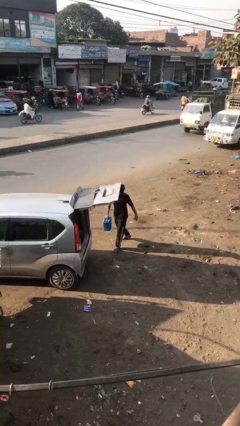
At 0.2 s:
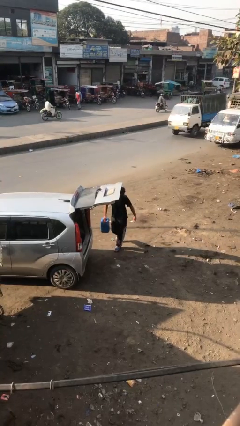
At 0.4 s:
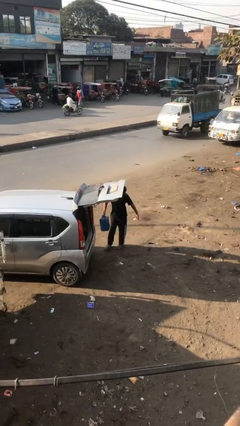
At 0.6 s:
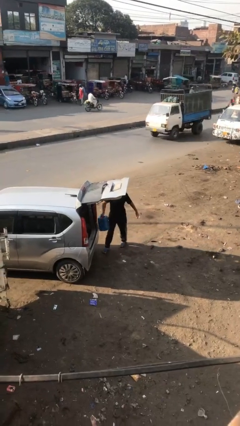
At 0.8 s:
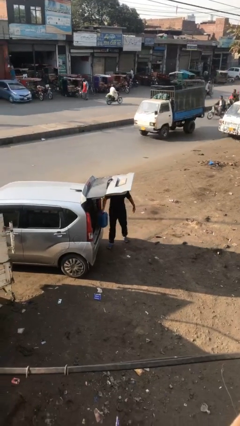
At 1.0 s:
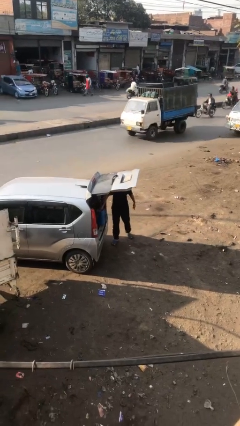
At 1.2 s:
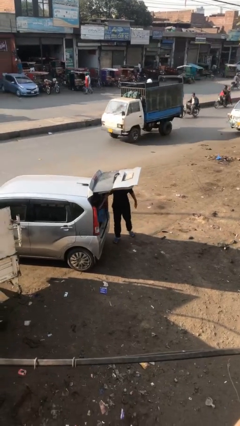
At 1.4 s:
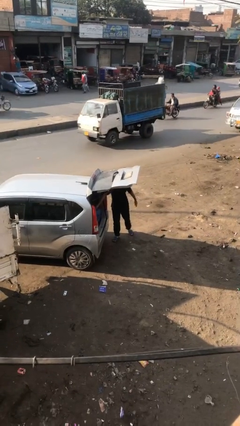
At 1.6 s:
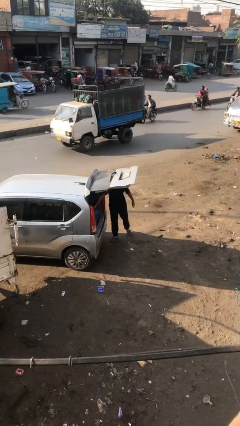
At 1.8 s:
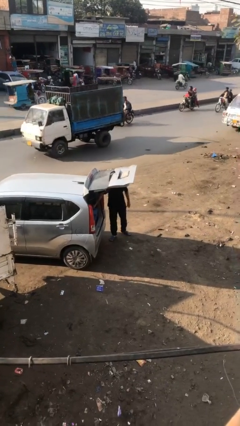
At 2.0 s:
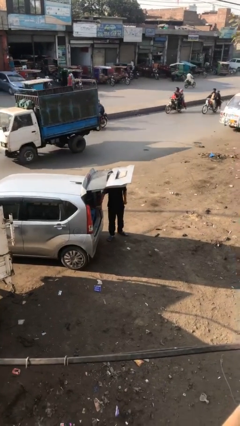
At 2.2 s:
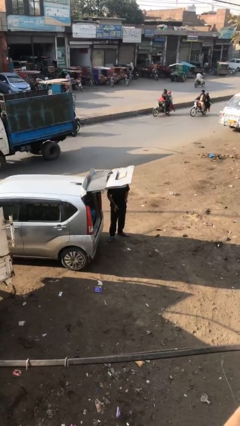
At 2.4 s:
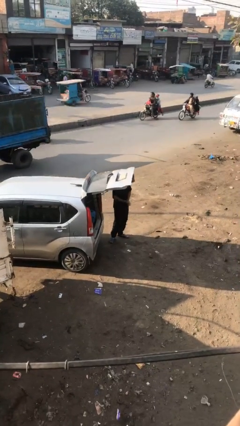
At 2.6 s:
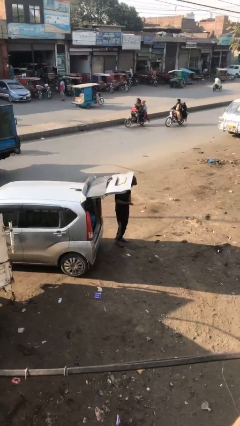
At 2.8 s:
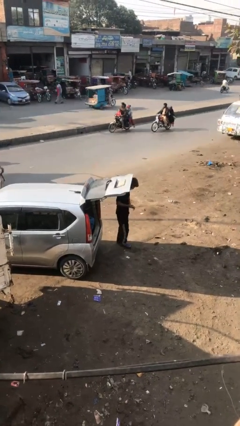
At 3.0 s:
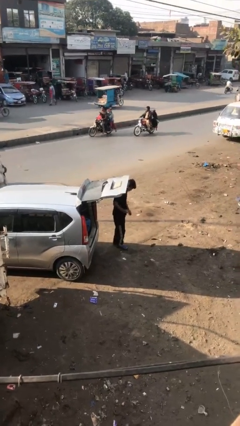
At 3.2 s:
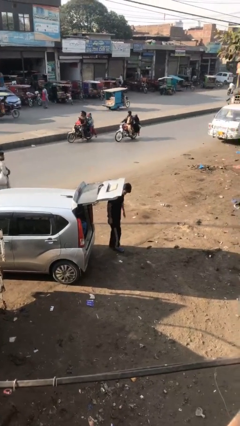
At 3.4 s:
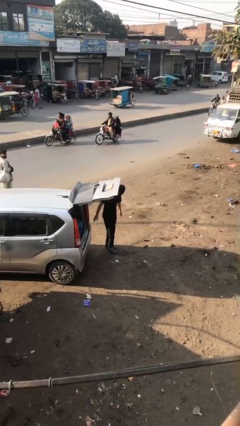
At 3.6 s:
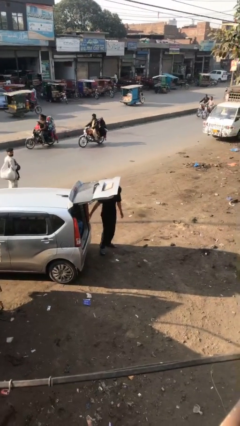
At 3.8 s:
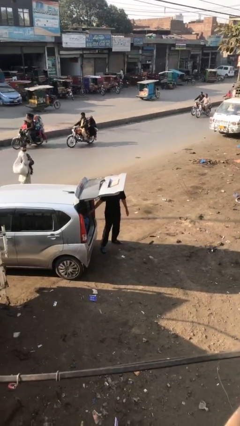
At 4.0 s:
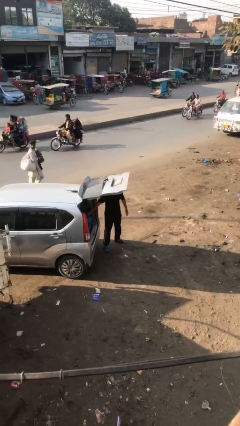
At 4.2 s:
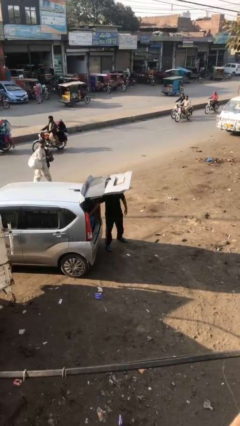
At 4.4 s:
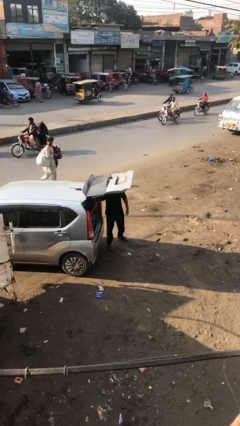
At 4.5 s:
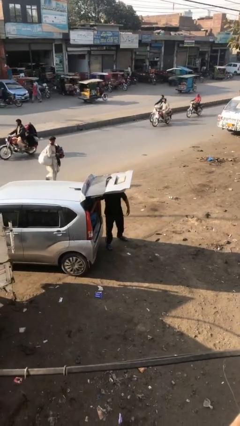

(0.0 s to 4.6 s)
person loads car

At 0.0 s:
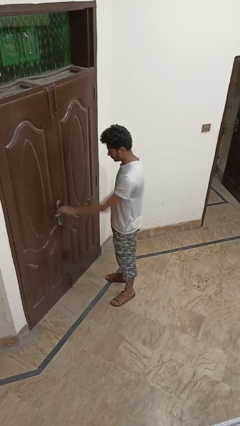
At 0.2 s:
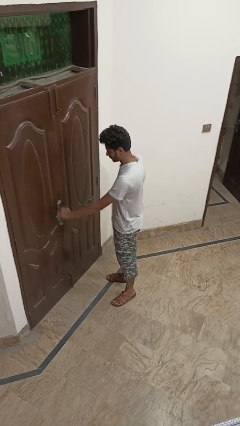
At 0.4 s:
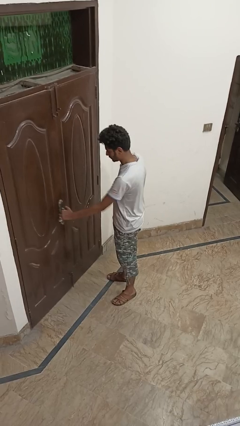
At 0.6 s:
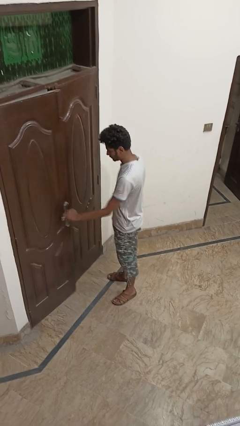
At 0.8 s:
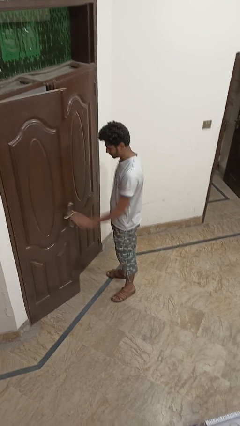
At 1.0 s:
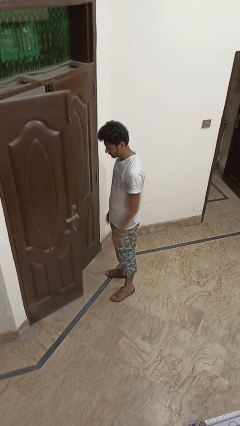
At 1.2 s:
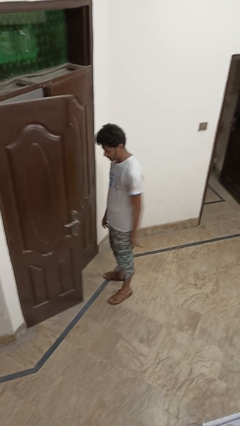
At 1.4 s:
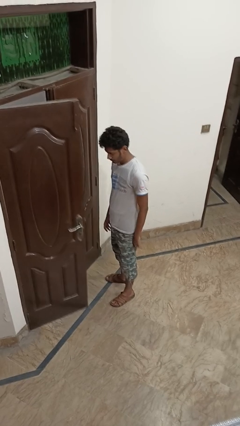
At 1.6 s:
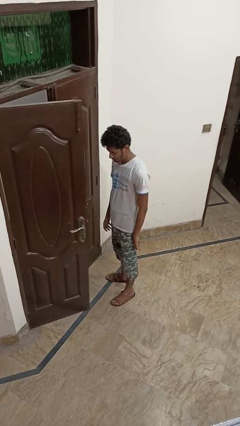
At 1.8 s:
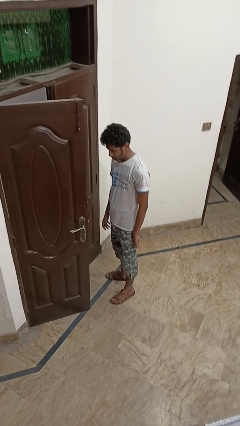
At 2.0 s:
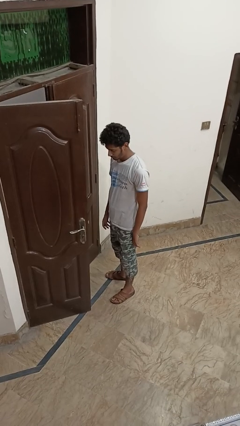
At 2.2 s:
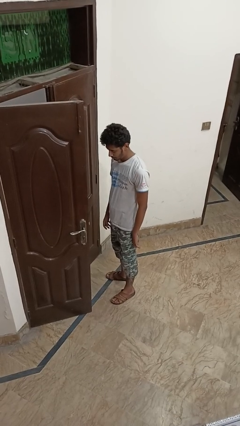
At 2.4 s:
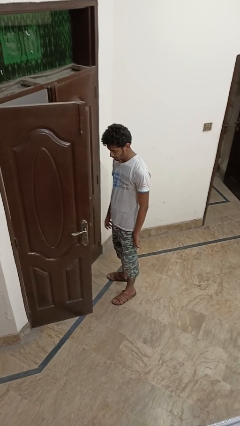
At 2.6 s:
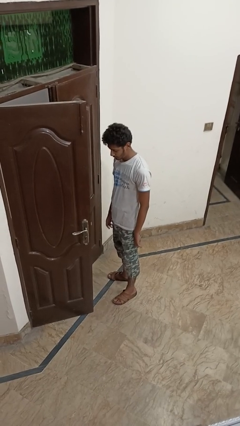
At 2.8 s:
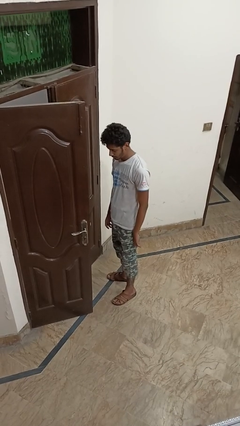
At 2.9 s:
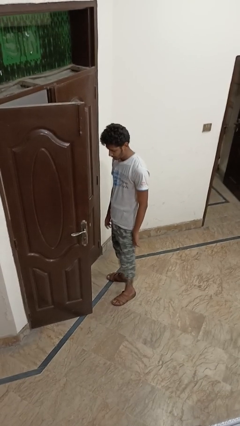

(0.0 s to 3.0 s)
person opens facility door

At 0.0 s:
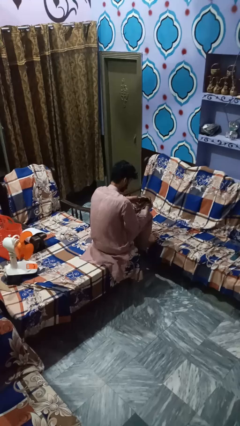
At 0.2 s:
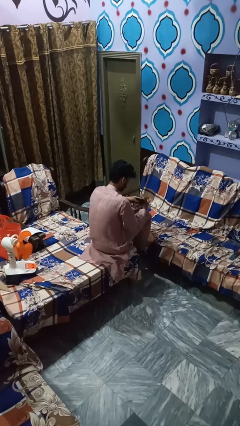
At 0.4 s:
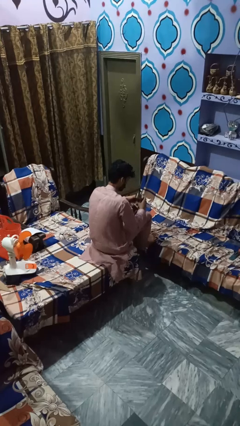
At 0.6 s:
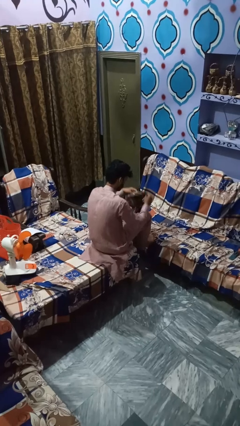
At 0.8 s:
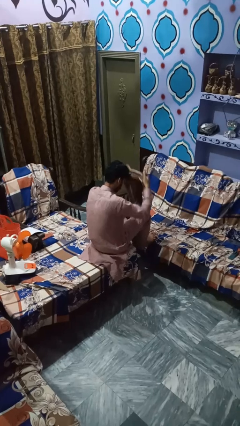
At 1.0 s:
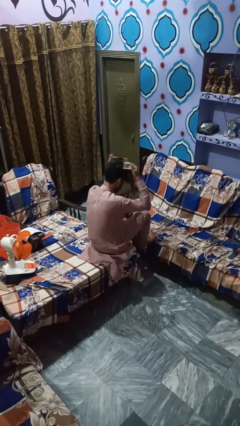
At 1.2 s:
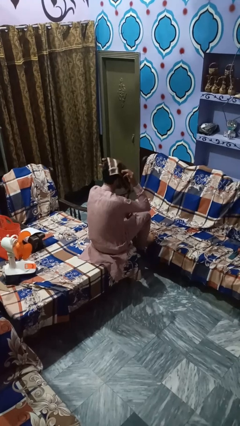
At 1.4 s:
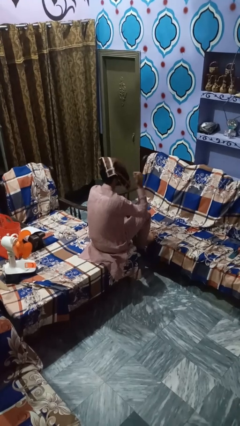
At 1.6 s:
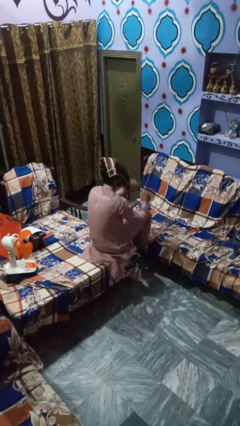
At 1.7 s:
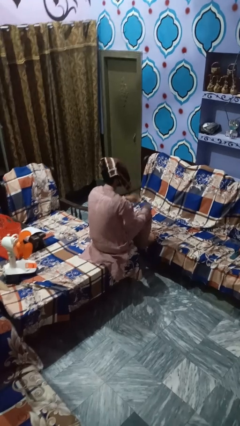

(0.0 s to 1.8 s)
person yawns

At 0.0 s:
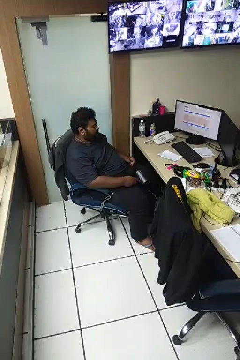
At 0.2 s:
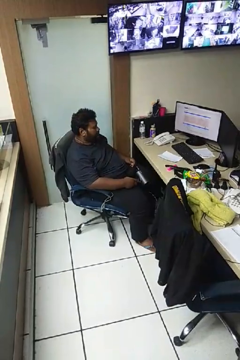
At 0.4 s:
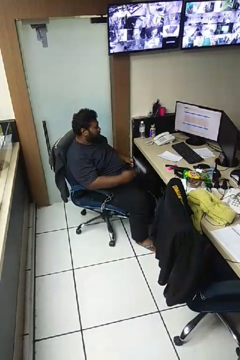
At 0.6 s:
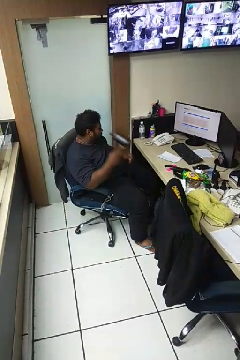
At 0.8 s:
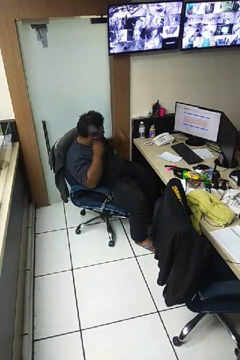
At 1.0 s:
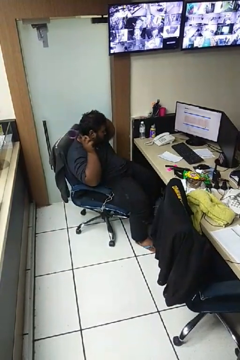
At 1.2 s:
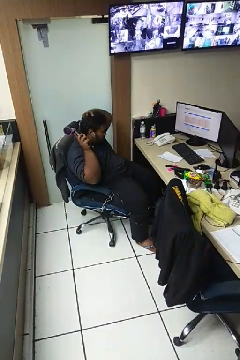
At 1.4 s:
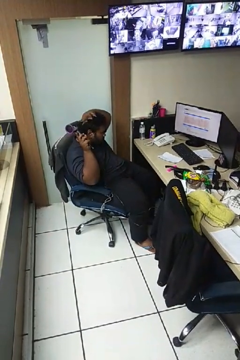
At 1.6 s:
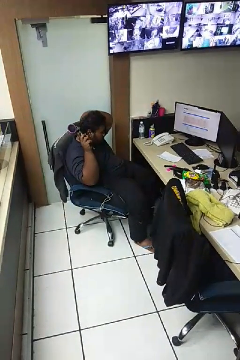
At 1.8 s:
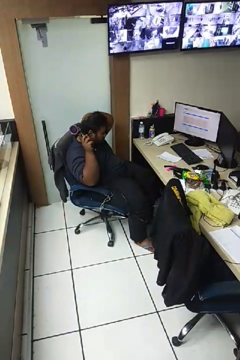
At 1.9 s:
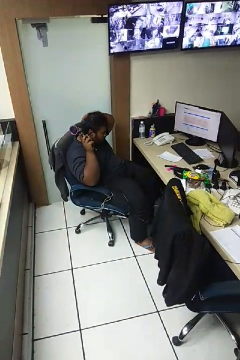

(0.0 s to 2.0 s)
person dries hair with hairdryer

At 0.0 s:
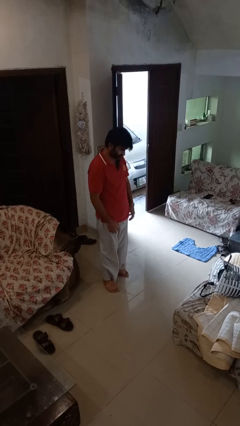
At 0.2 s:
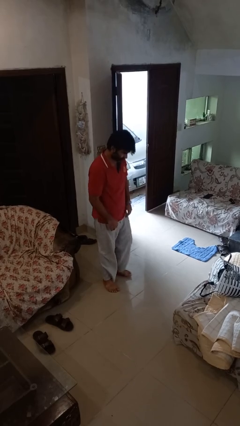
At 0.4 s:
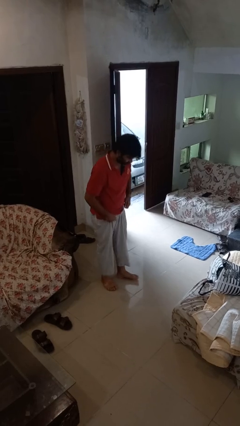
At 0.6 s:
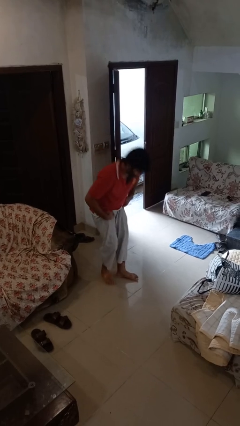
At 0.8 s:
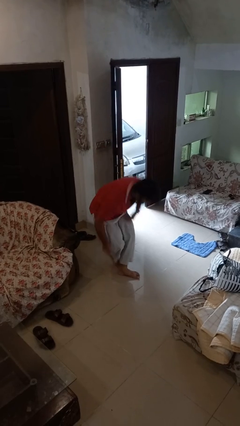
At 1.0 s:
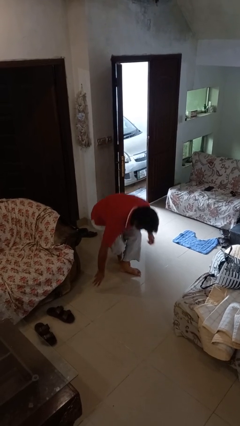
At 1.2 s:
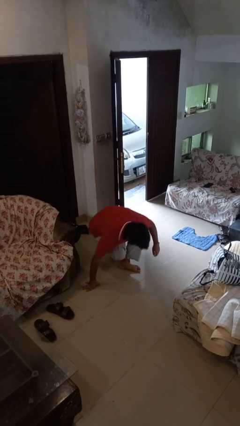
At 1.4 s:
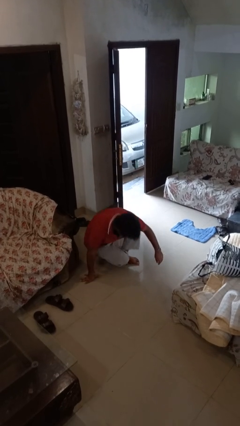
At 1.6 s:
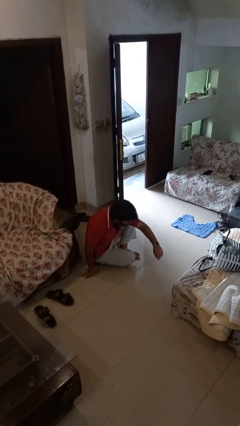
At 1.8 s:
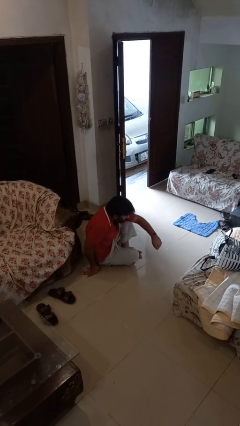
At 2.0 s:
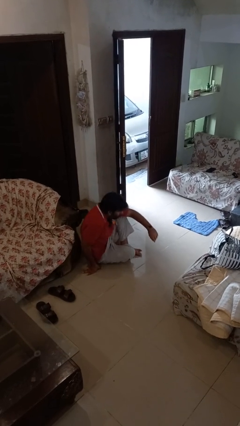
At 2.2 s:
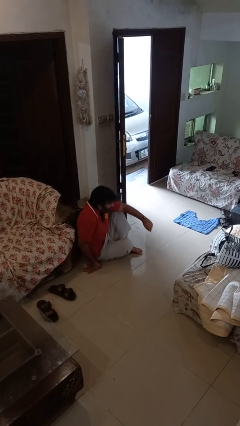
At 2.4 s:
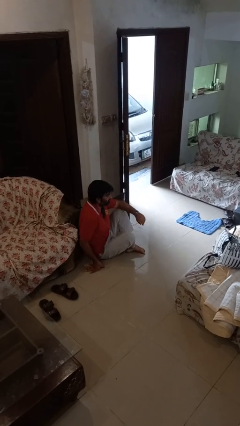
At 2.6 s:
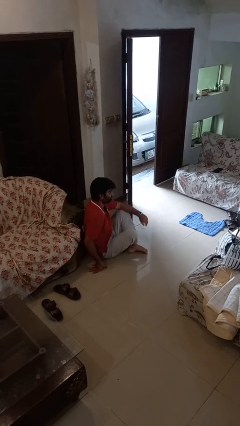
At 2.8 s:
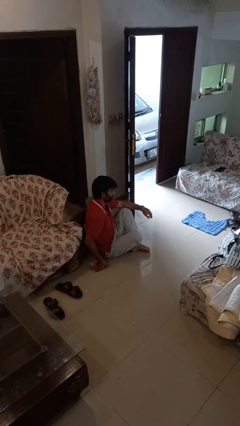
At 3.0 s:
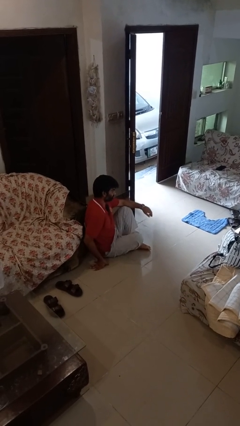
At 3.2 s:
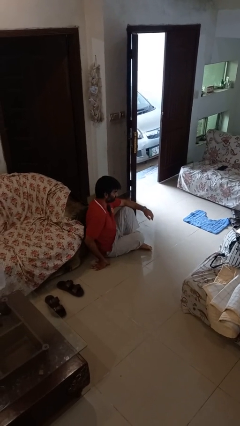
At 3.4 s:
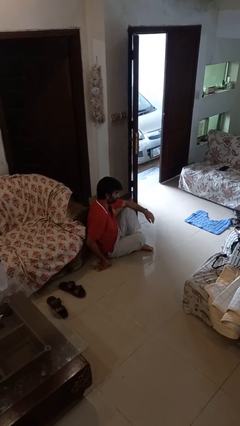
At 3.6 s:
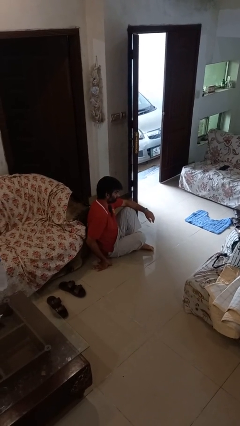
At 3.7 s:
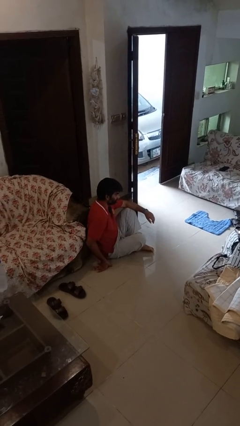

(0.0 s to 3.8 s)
person sits crisscross

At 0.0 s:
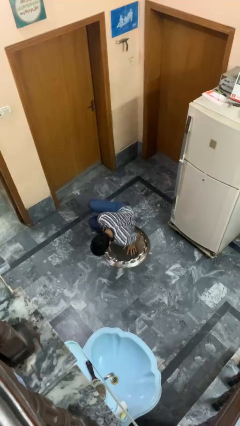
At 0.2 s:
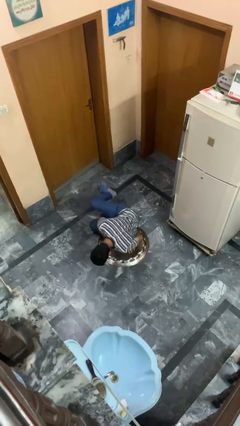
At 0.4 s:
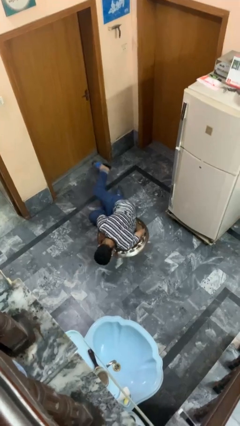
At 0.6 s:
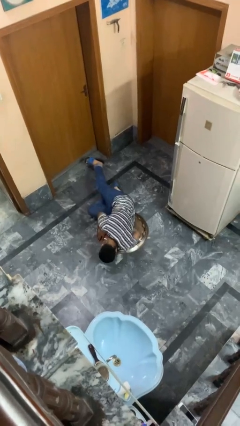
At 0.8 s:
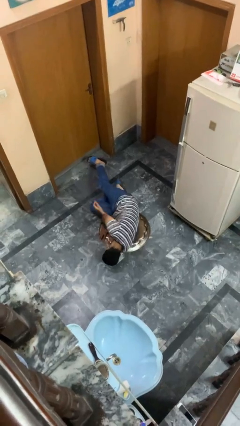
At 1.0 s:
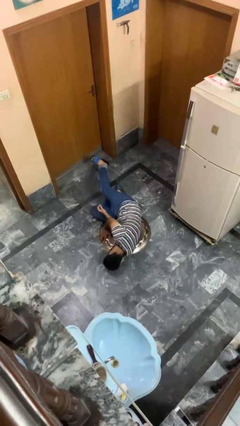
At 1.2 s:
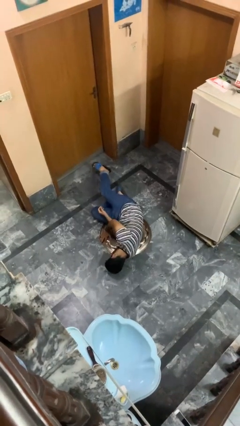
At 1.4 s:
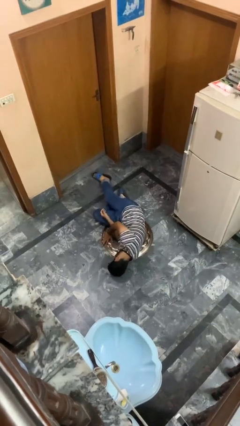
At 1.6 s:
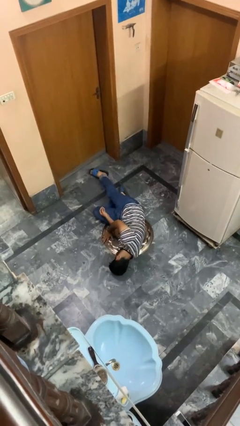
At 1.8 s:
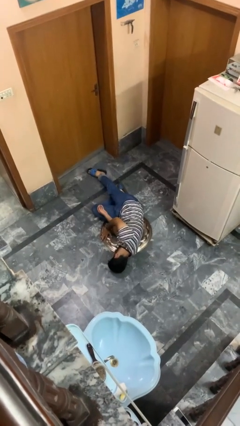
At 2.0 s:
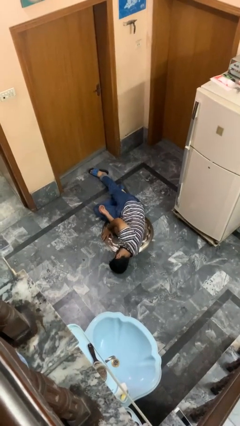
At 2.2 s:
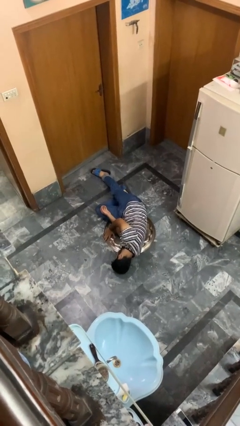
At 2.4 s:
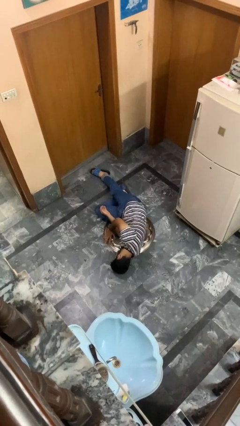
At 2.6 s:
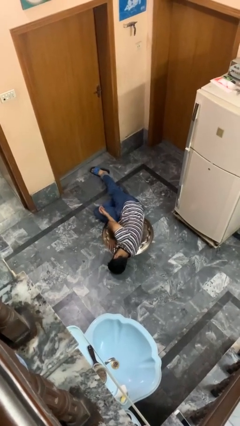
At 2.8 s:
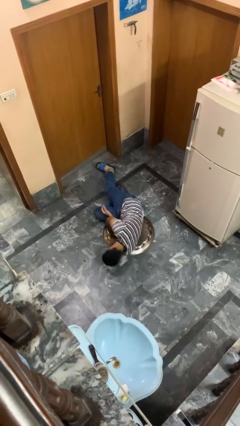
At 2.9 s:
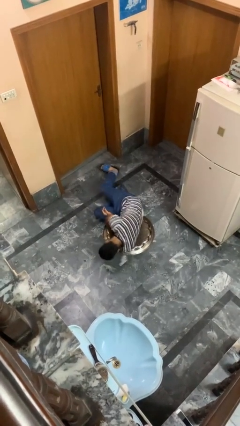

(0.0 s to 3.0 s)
person lies down on floor
